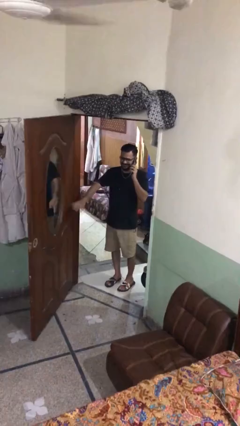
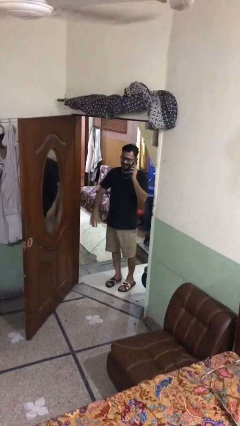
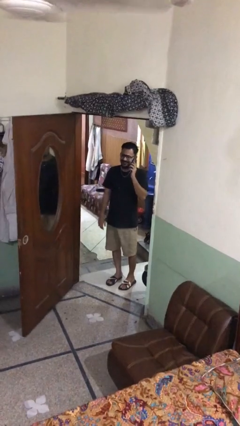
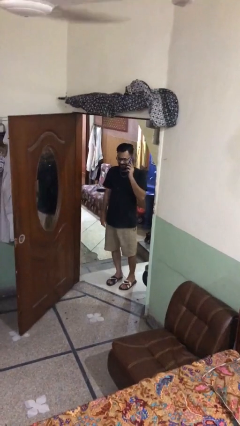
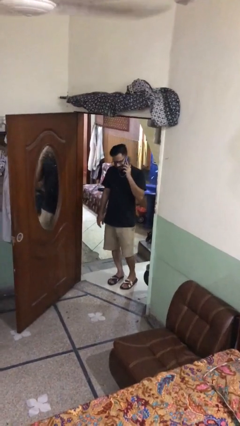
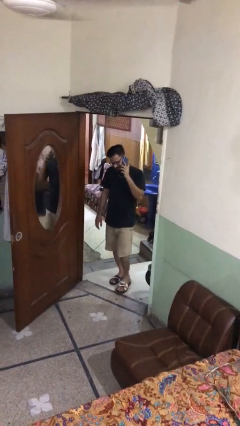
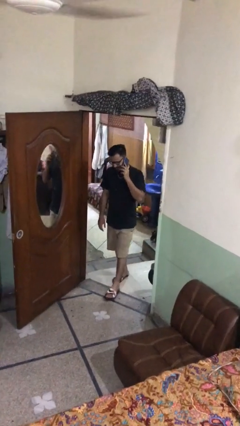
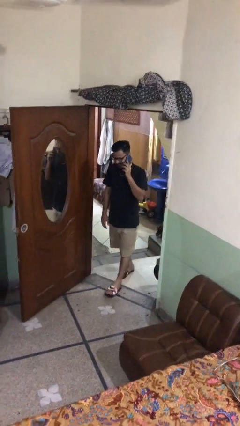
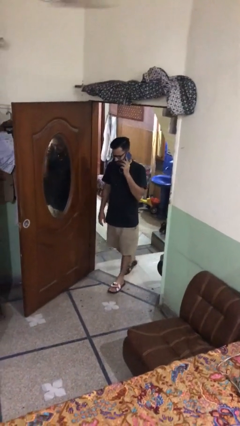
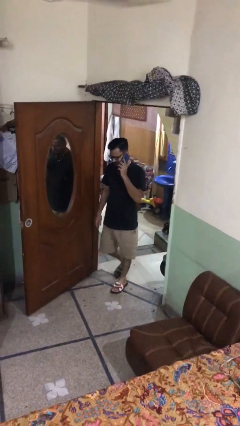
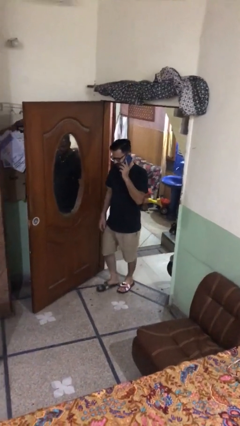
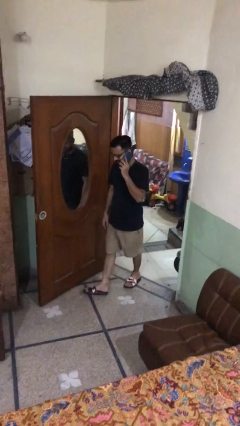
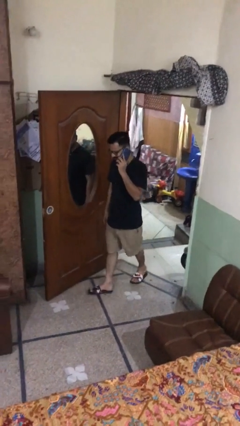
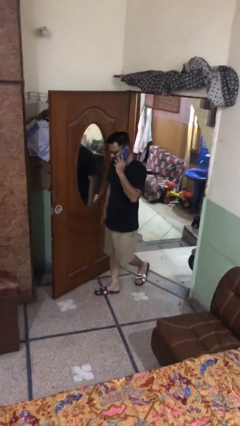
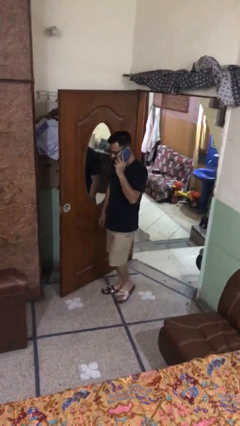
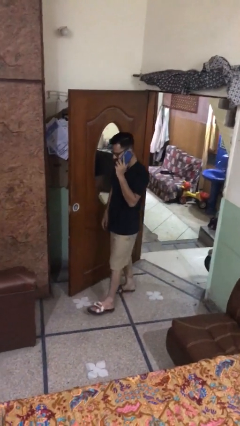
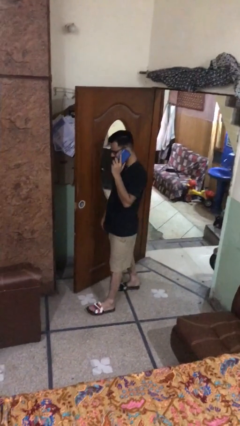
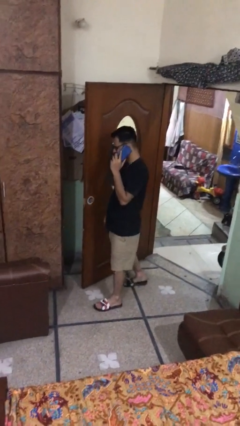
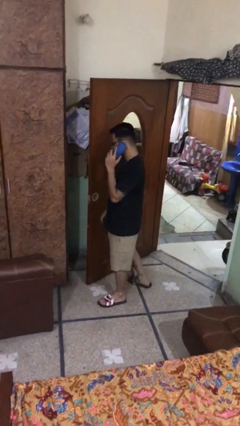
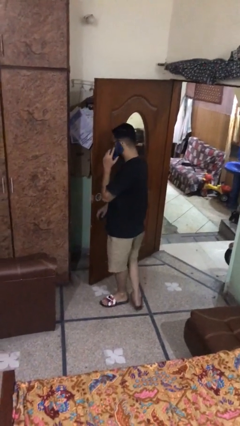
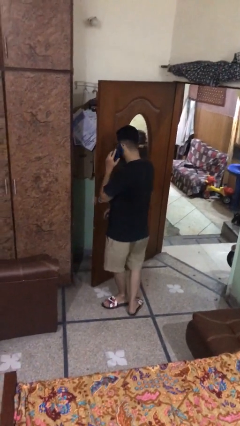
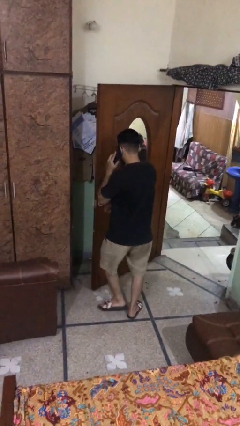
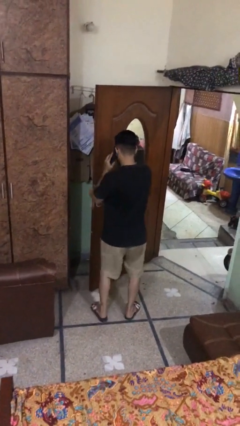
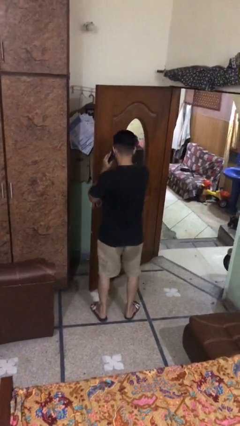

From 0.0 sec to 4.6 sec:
person enters scene through structure

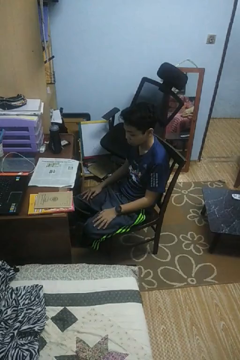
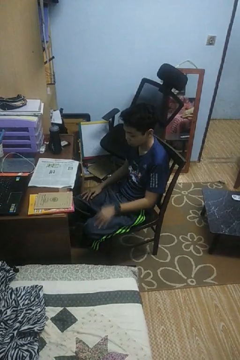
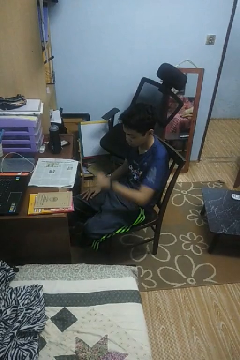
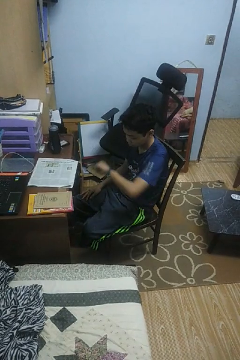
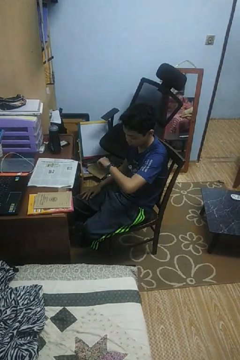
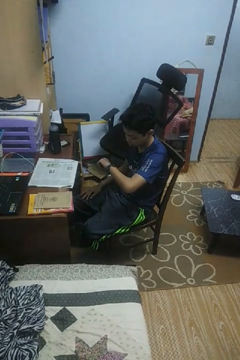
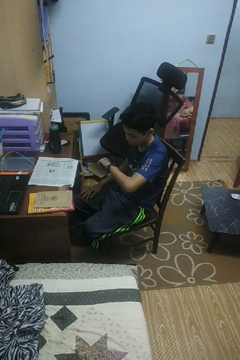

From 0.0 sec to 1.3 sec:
person looks at wristwatch

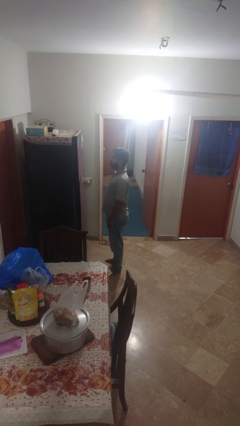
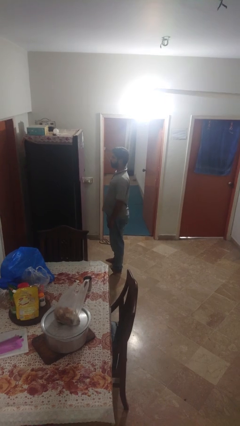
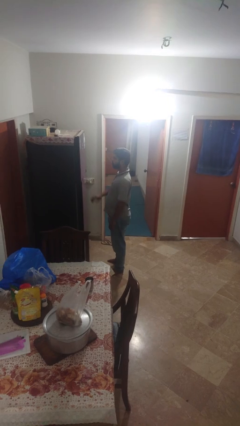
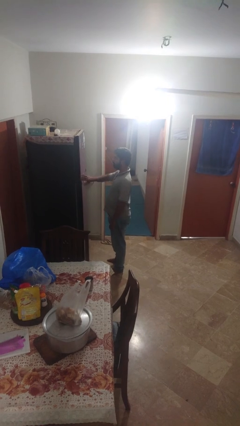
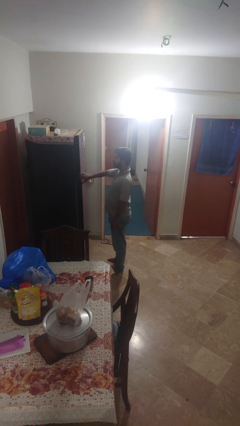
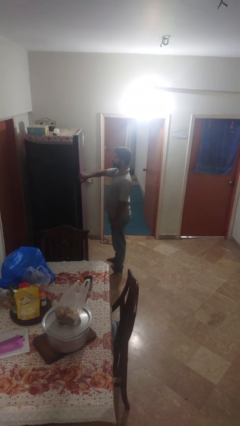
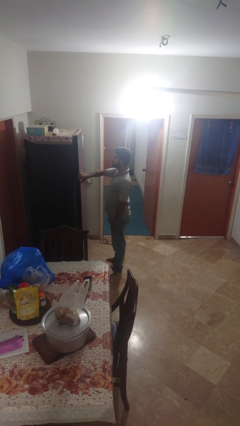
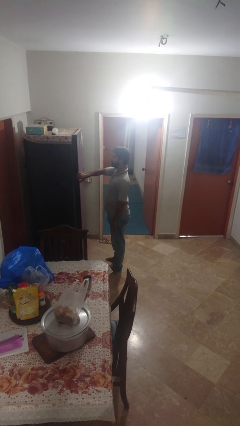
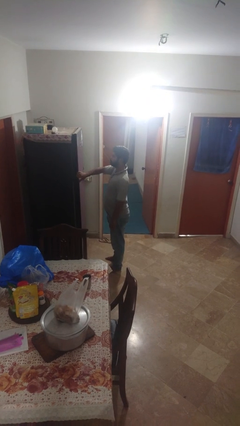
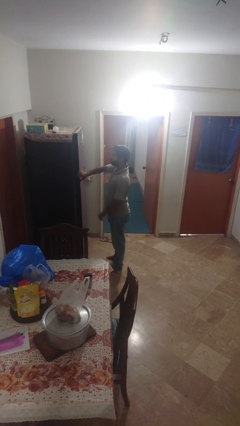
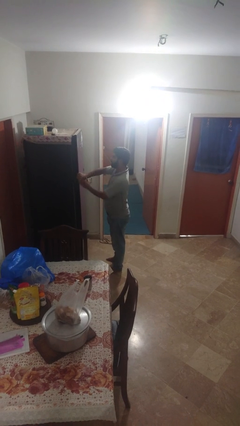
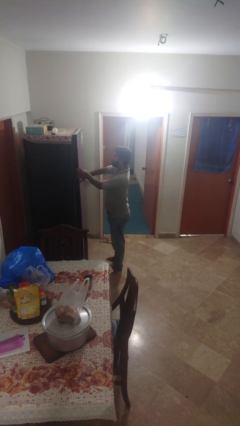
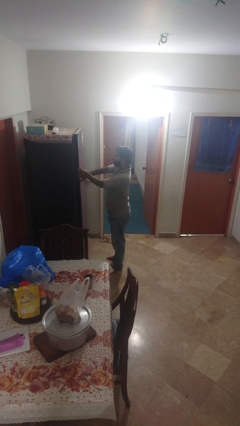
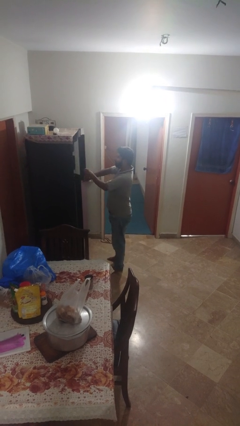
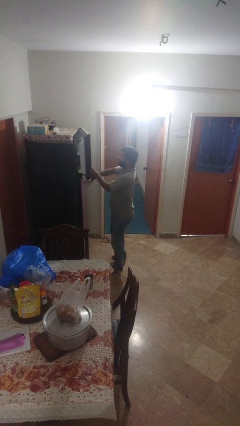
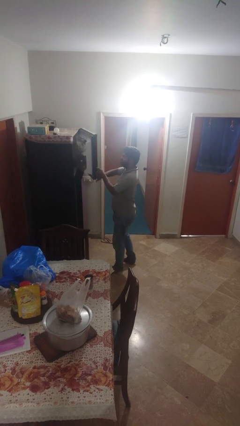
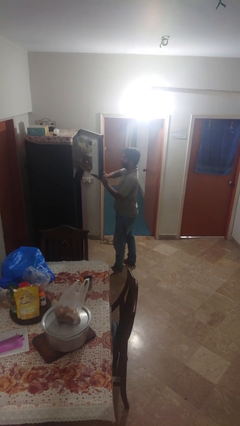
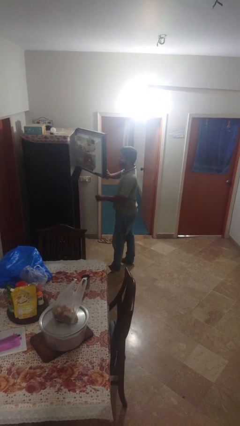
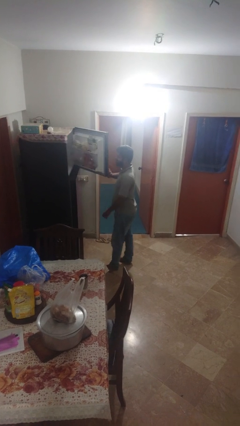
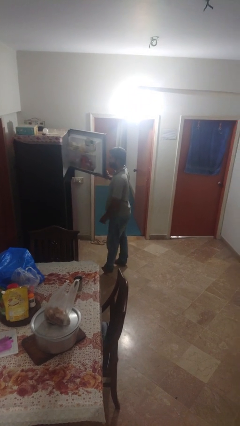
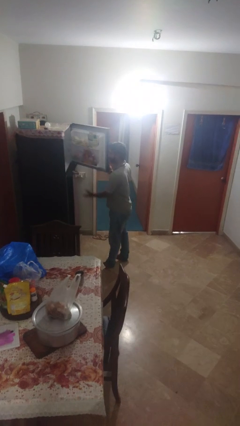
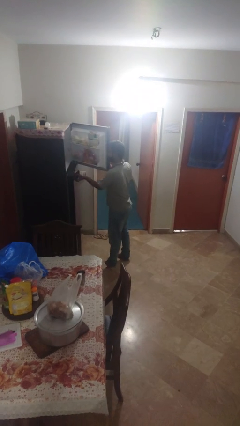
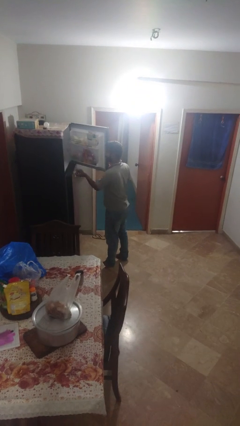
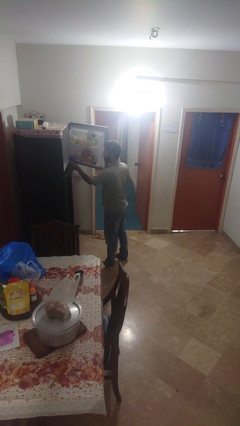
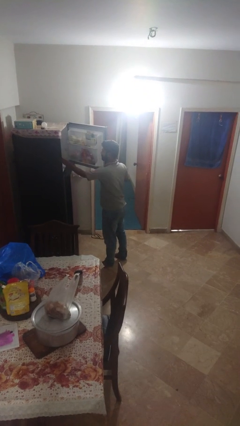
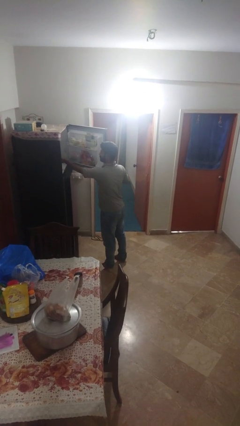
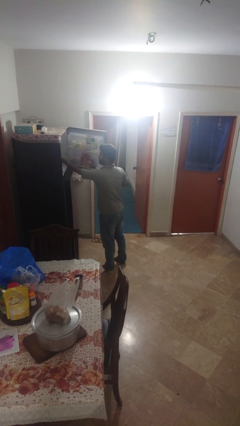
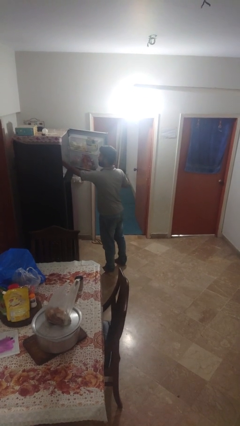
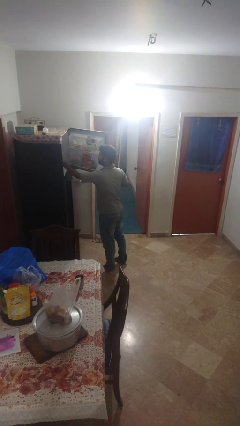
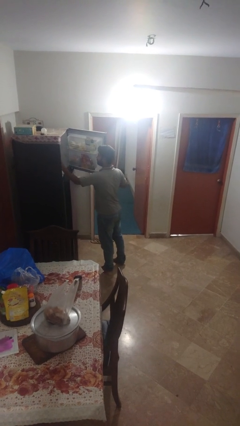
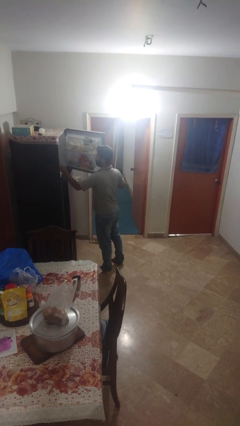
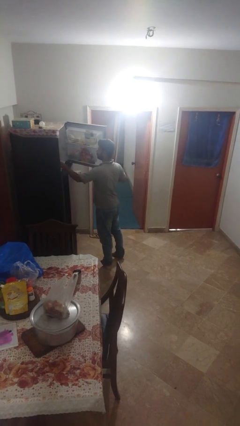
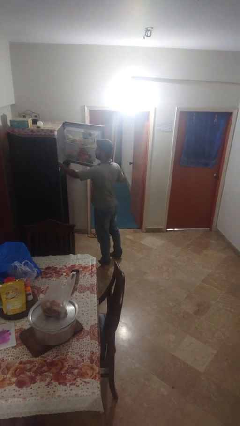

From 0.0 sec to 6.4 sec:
person opens refrigerator

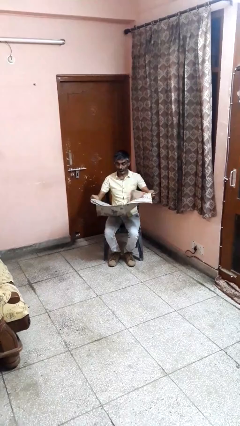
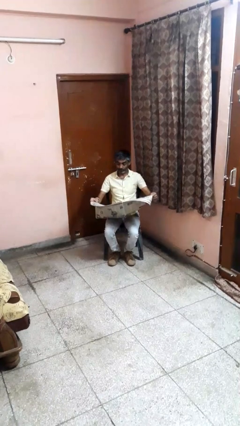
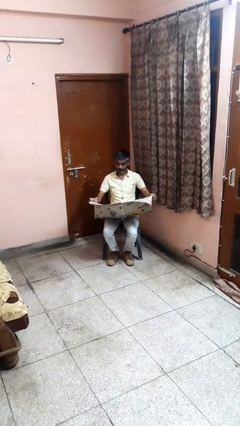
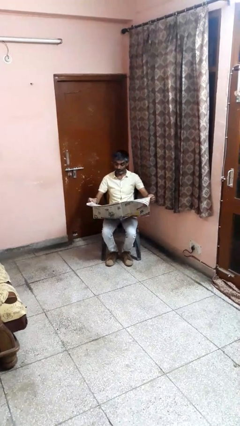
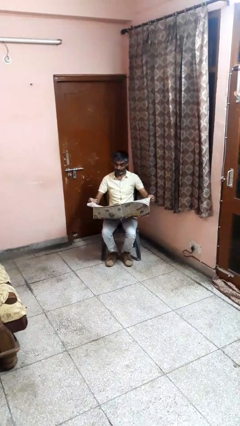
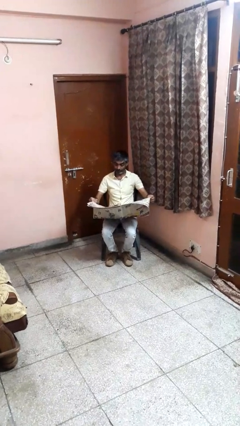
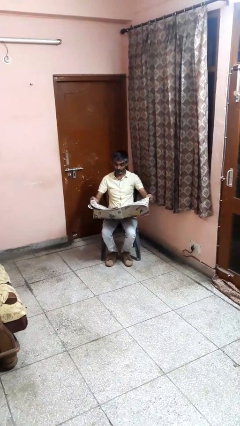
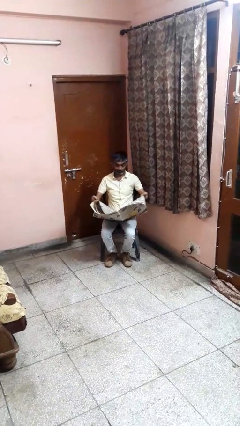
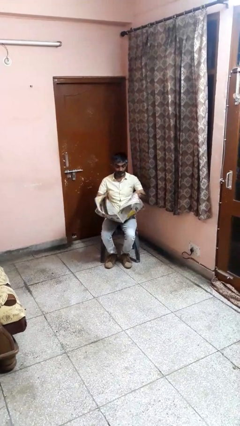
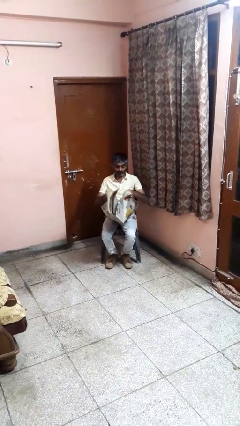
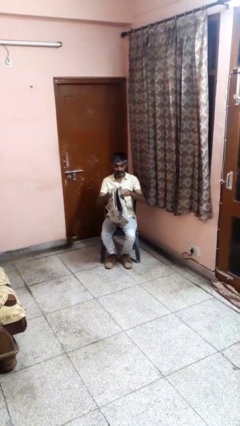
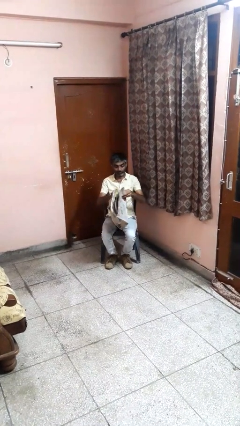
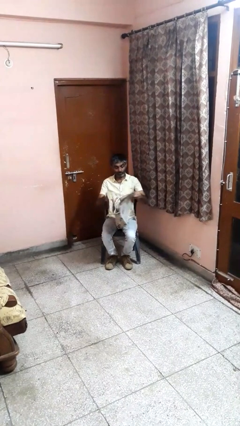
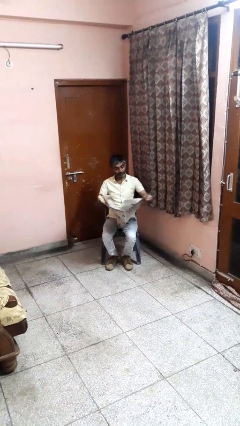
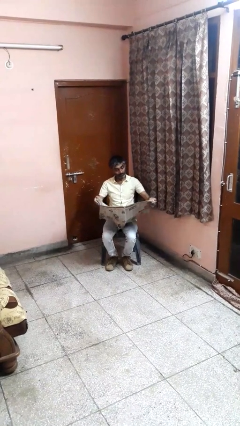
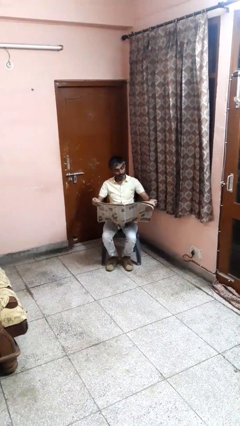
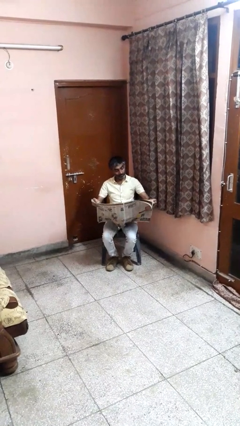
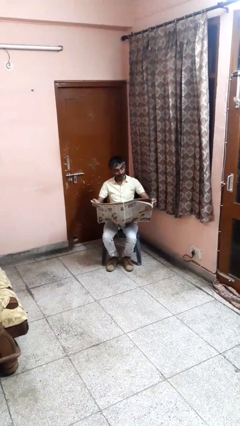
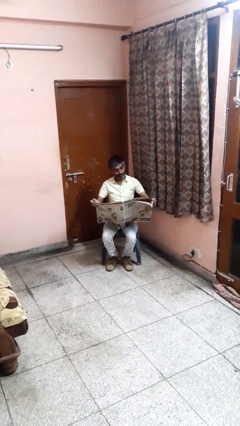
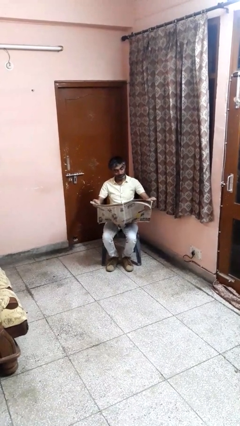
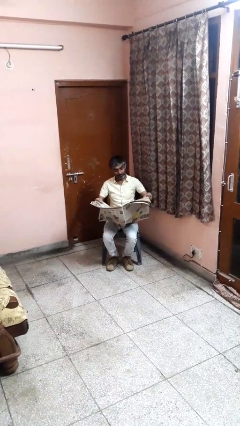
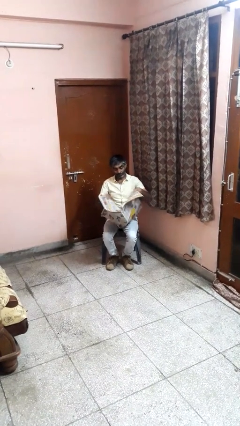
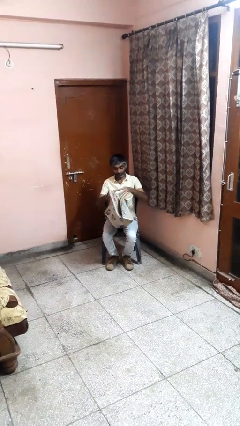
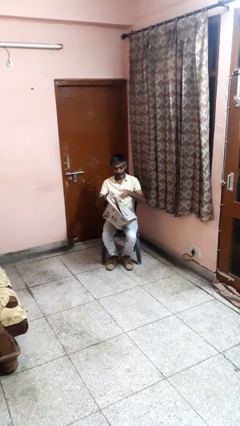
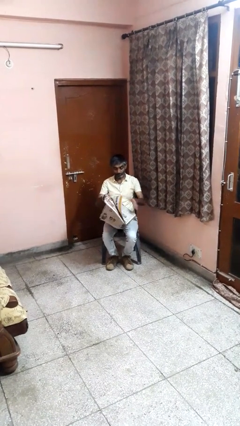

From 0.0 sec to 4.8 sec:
person reads newspaper

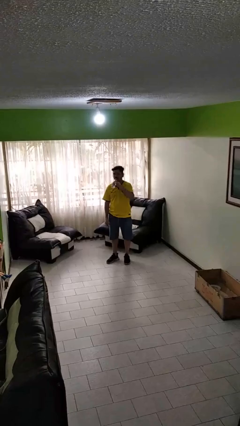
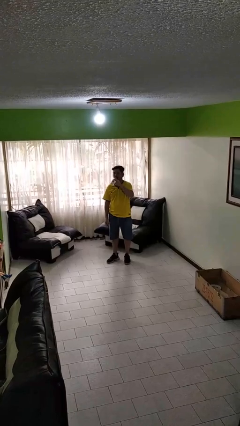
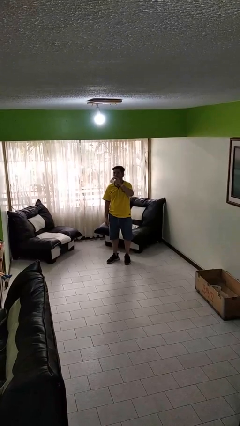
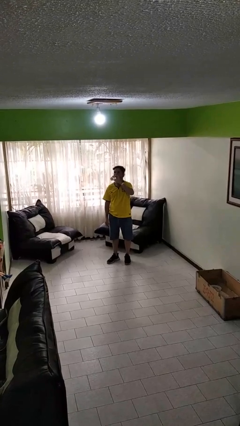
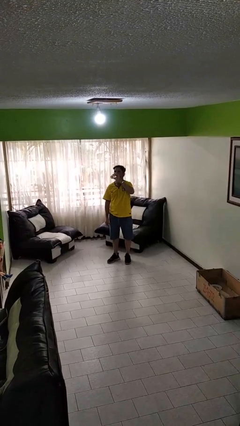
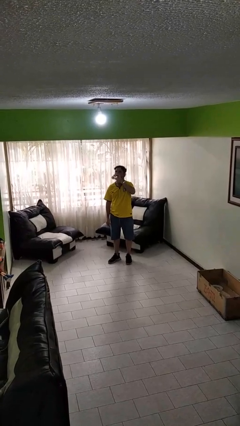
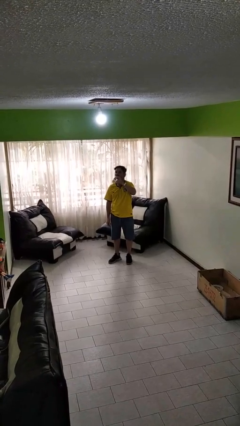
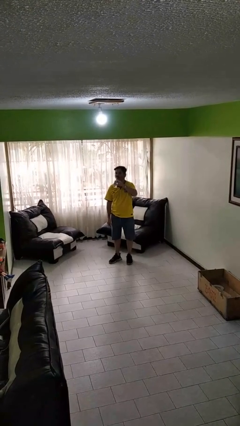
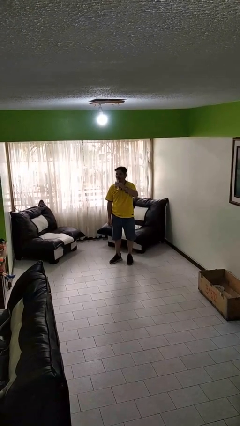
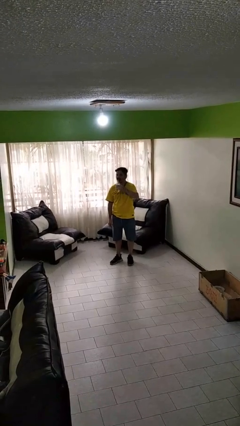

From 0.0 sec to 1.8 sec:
person drinks from bottle
